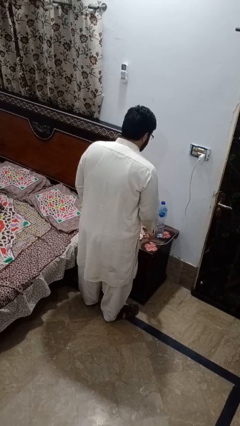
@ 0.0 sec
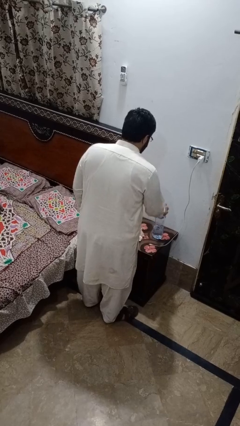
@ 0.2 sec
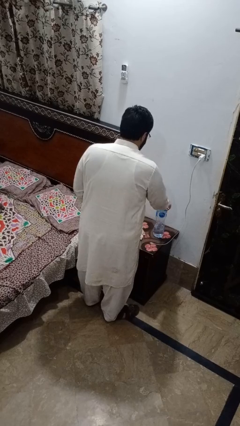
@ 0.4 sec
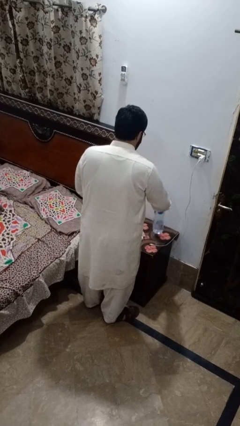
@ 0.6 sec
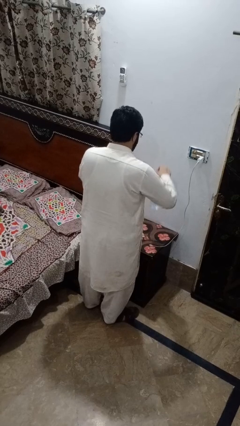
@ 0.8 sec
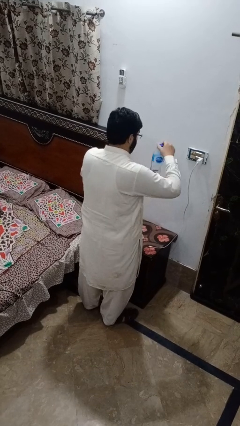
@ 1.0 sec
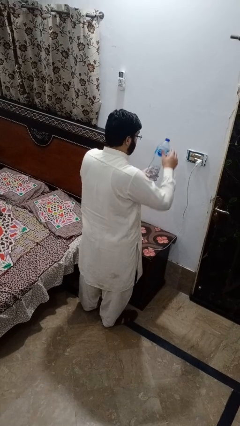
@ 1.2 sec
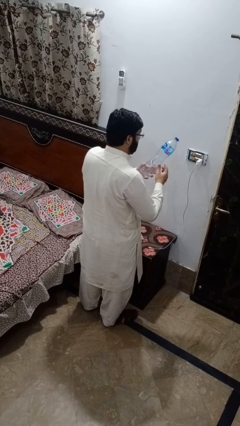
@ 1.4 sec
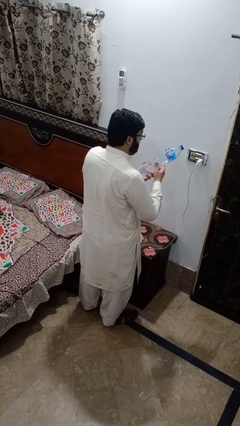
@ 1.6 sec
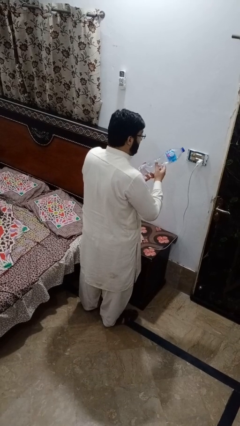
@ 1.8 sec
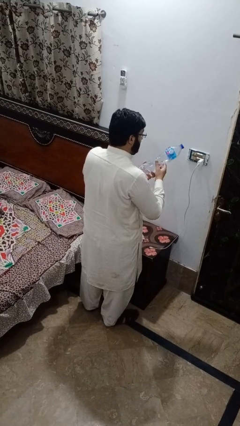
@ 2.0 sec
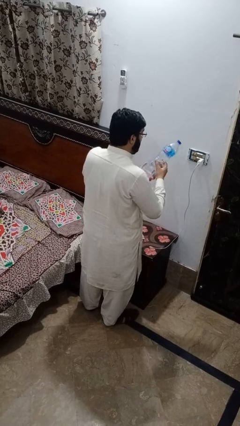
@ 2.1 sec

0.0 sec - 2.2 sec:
person picks up object from countertop

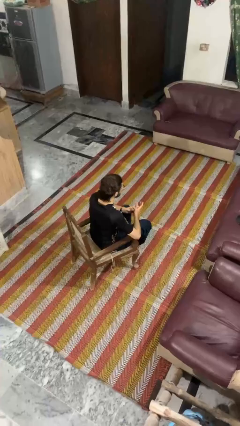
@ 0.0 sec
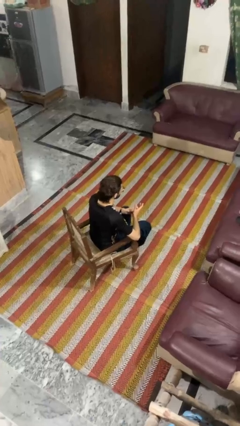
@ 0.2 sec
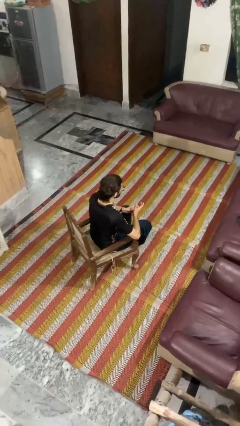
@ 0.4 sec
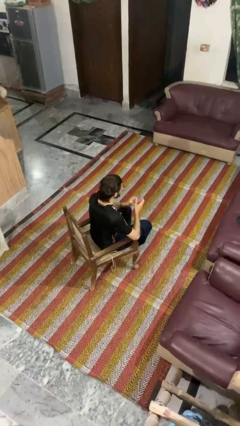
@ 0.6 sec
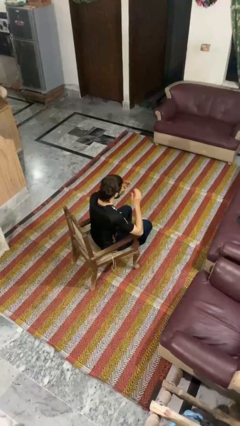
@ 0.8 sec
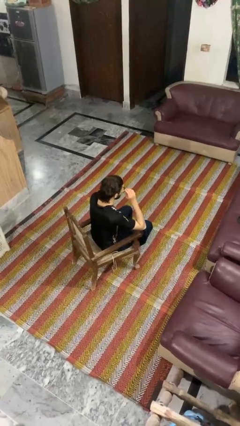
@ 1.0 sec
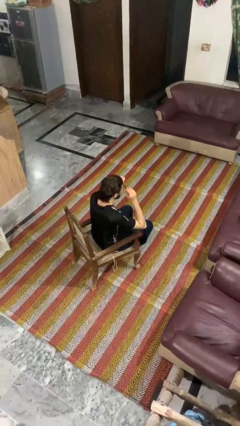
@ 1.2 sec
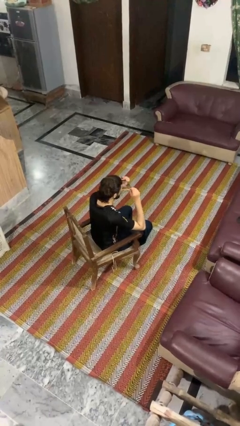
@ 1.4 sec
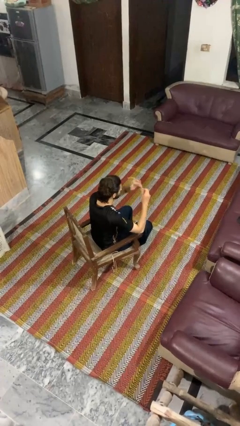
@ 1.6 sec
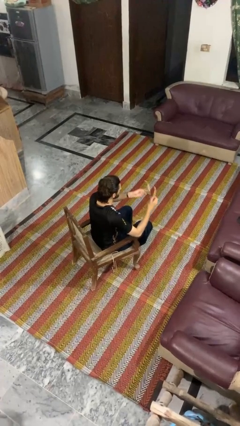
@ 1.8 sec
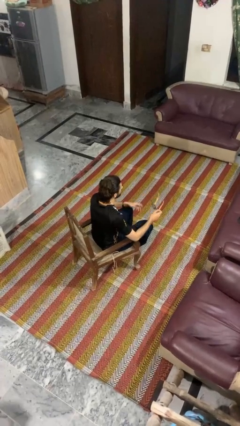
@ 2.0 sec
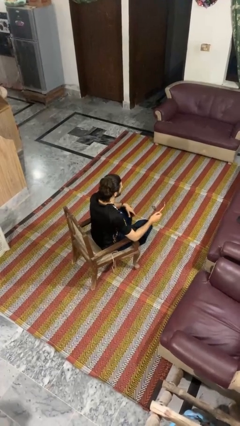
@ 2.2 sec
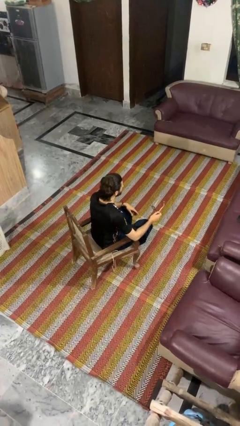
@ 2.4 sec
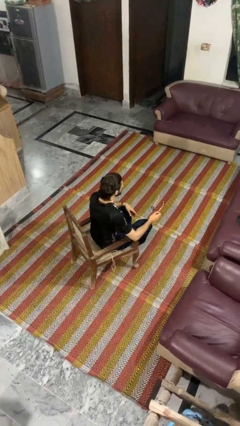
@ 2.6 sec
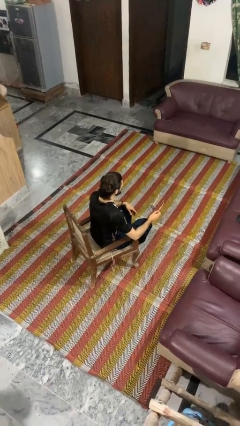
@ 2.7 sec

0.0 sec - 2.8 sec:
person takes off glasses

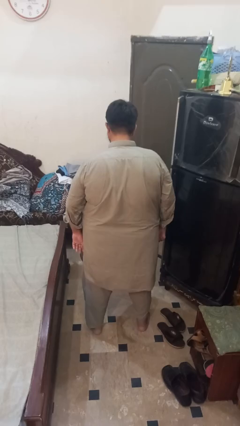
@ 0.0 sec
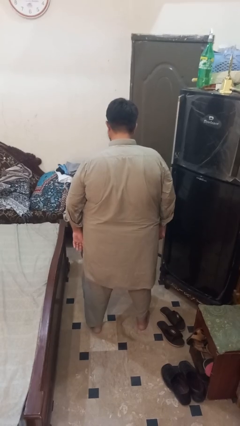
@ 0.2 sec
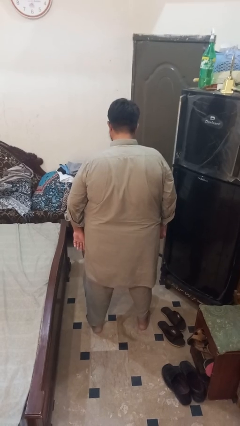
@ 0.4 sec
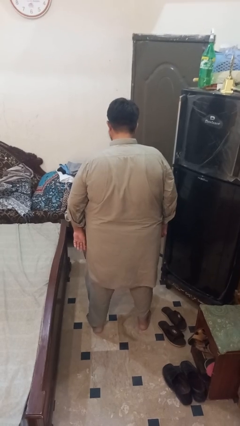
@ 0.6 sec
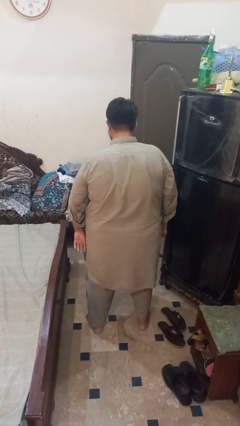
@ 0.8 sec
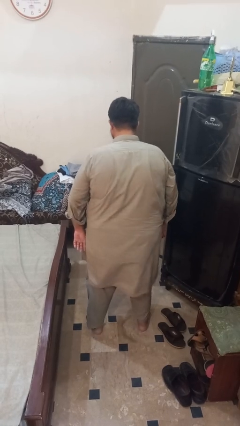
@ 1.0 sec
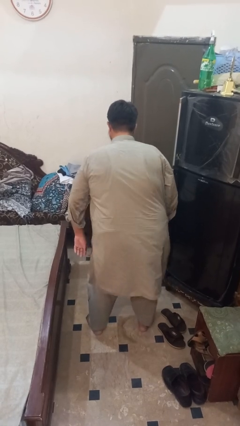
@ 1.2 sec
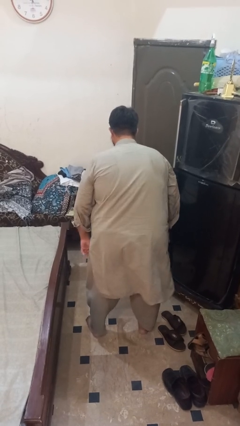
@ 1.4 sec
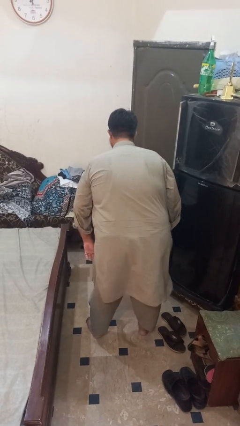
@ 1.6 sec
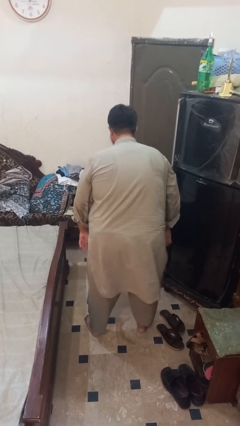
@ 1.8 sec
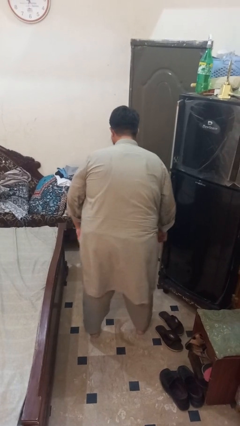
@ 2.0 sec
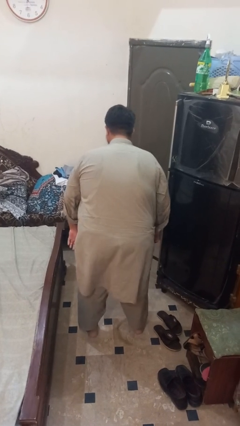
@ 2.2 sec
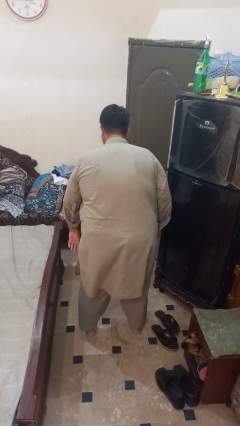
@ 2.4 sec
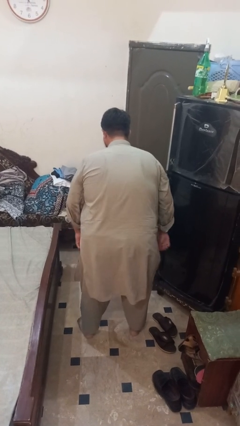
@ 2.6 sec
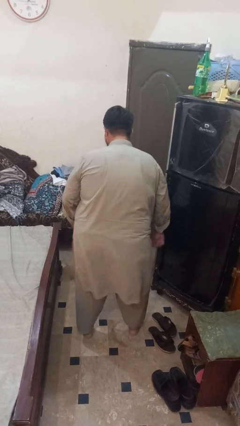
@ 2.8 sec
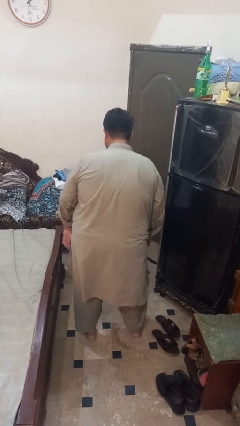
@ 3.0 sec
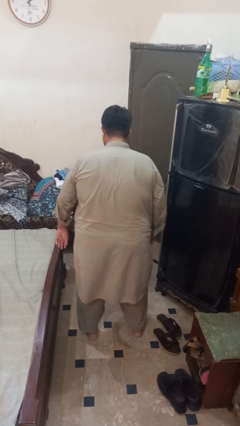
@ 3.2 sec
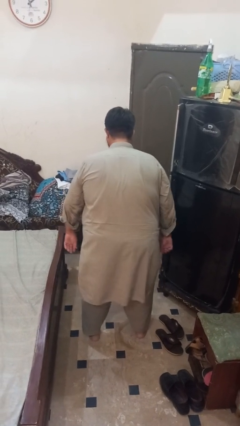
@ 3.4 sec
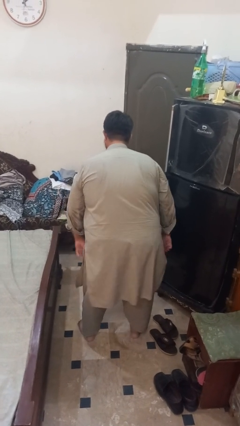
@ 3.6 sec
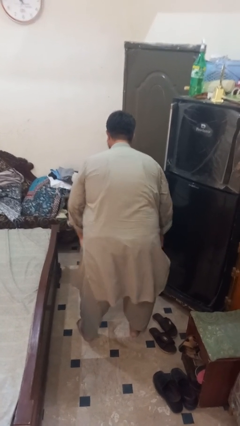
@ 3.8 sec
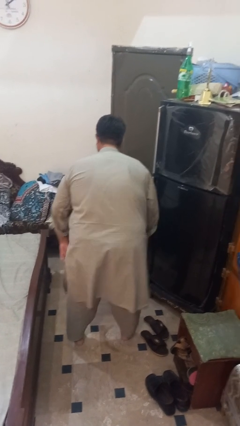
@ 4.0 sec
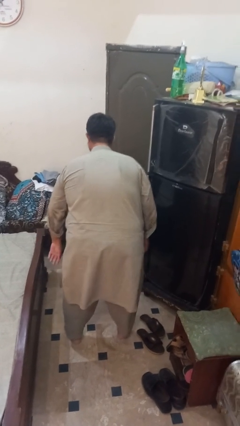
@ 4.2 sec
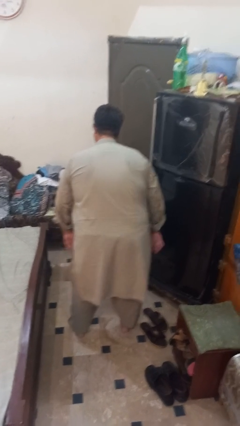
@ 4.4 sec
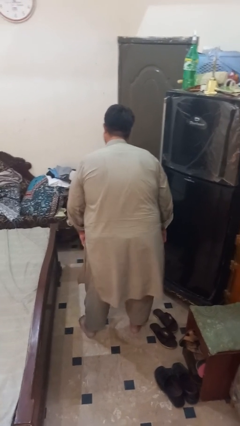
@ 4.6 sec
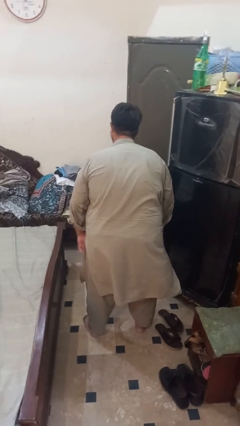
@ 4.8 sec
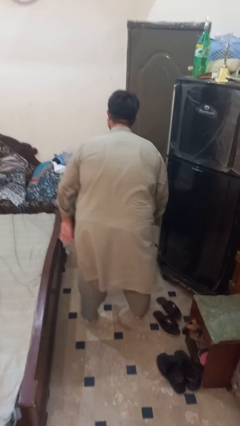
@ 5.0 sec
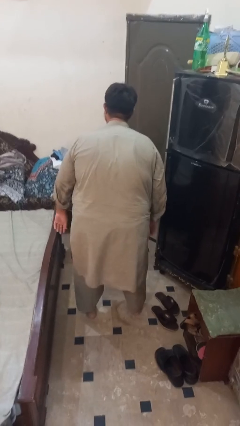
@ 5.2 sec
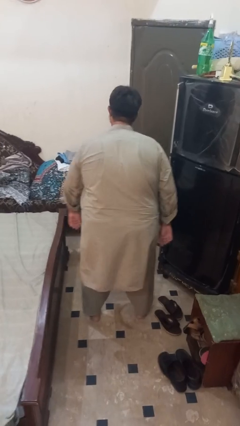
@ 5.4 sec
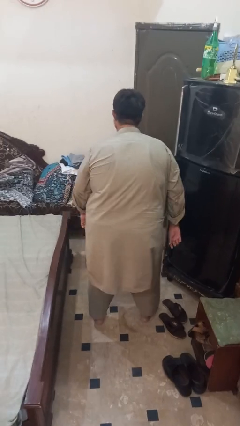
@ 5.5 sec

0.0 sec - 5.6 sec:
person wiggles hips

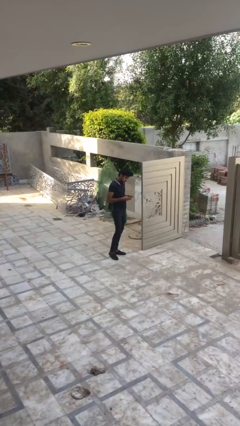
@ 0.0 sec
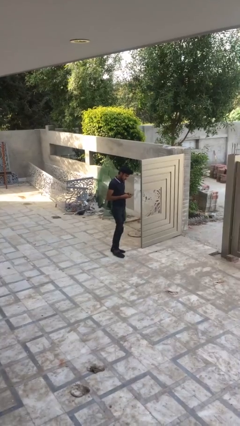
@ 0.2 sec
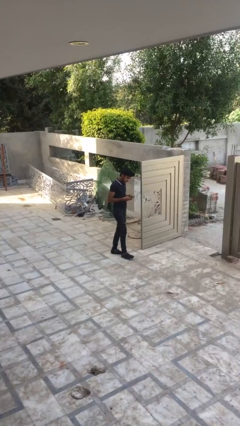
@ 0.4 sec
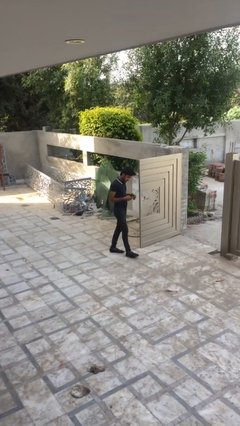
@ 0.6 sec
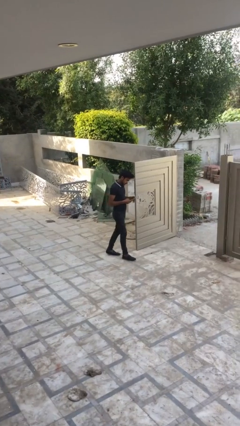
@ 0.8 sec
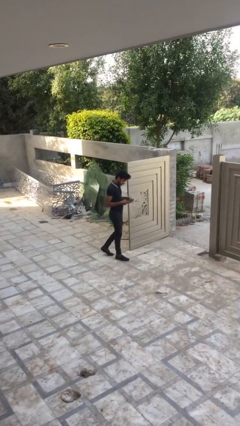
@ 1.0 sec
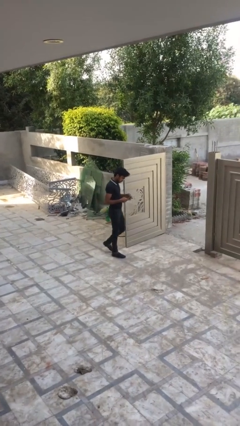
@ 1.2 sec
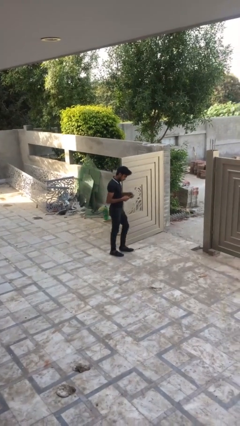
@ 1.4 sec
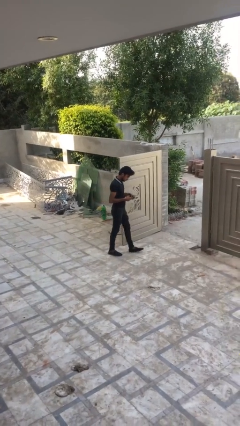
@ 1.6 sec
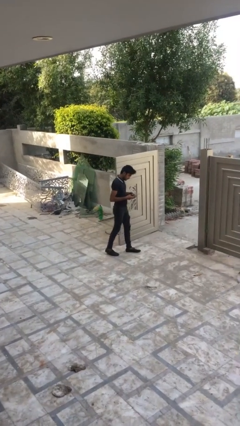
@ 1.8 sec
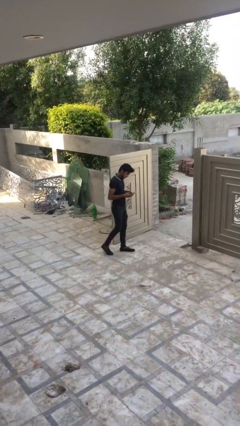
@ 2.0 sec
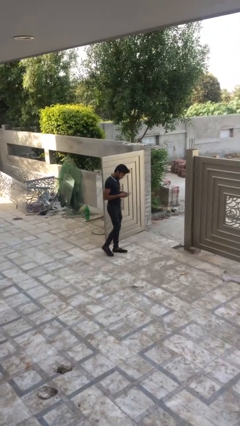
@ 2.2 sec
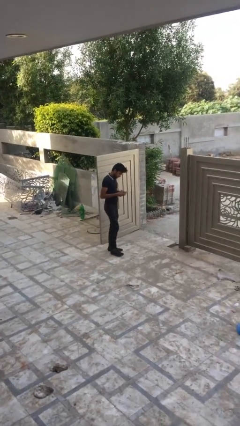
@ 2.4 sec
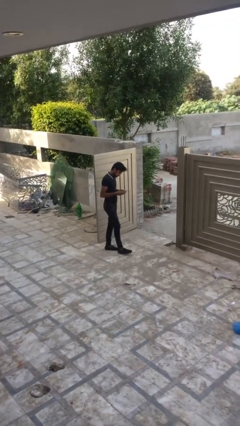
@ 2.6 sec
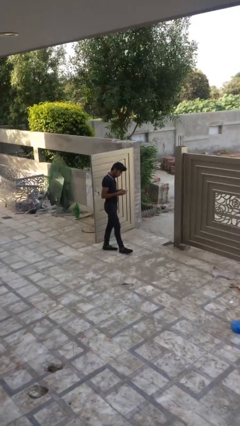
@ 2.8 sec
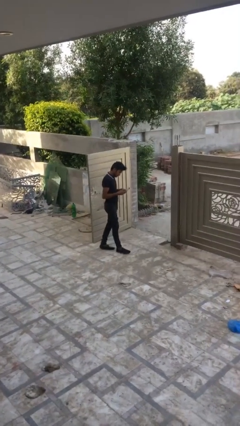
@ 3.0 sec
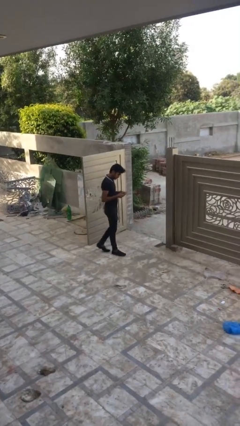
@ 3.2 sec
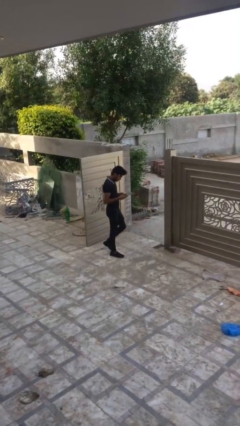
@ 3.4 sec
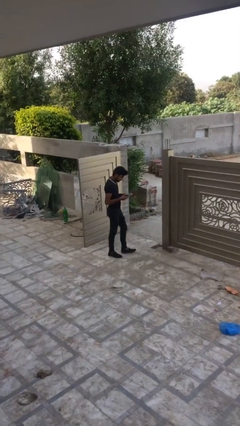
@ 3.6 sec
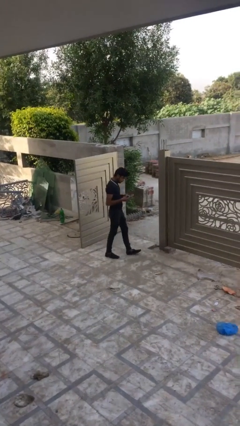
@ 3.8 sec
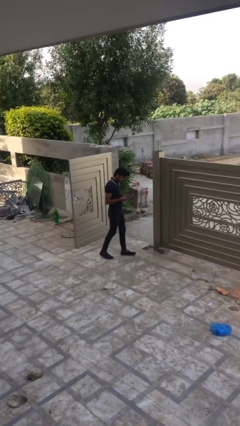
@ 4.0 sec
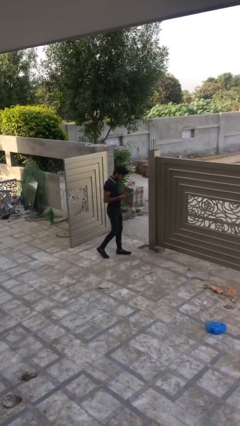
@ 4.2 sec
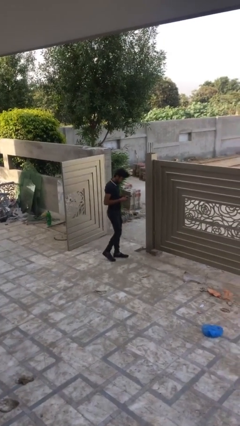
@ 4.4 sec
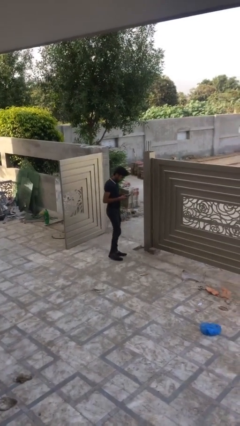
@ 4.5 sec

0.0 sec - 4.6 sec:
person texts on phone

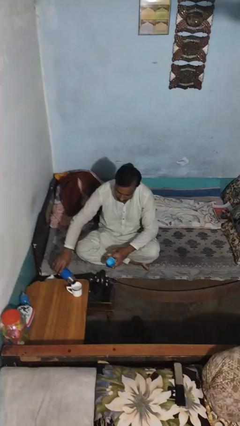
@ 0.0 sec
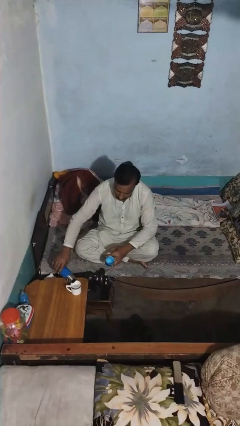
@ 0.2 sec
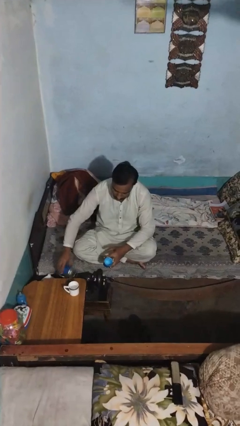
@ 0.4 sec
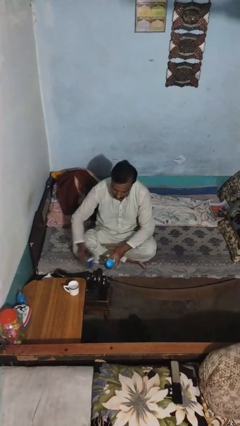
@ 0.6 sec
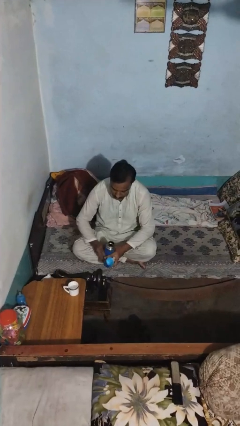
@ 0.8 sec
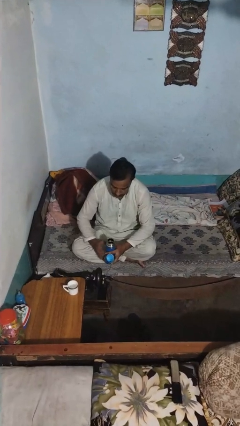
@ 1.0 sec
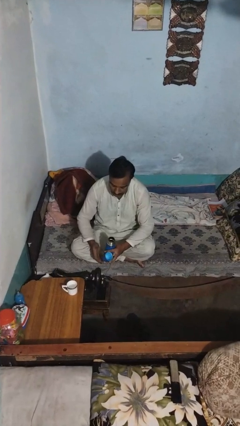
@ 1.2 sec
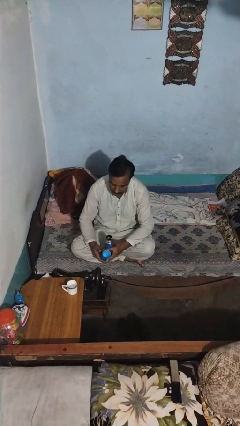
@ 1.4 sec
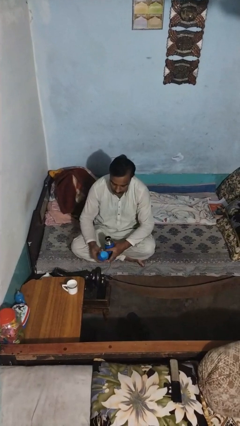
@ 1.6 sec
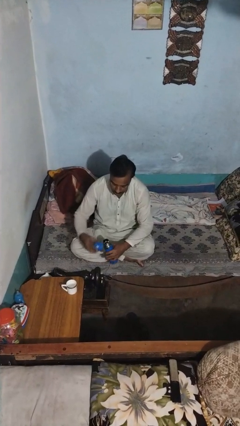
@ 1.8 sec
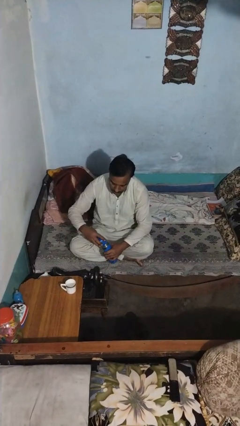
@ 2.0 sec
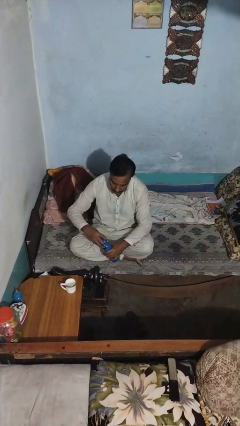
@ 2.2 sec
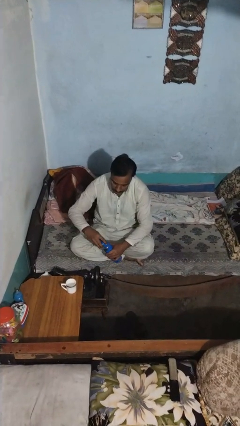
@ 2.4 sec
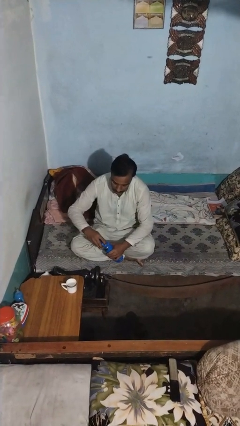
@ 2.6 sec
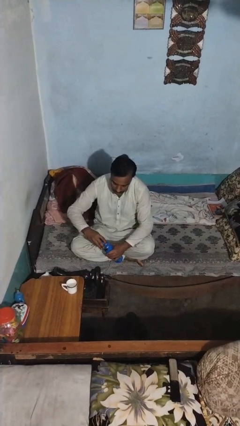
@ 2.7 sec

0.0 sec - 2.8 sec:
person screws lid to bottle
